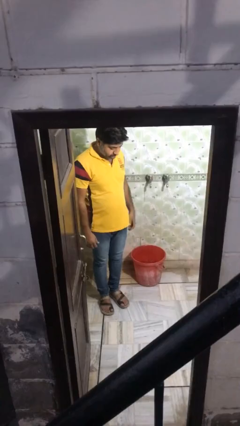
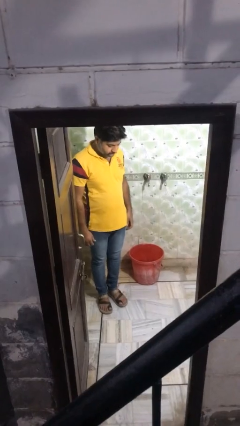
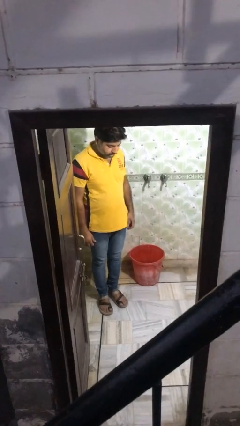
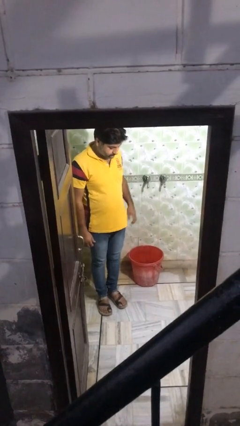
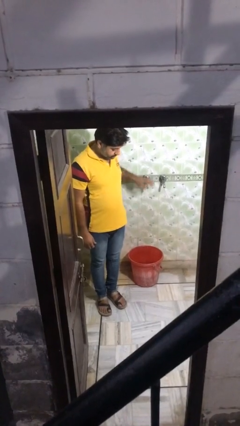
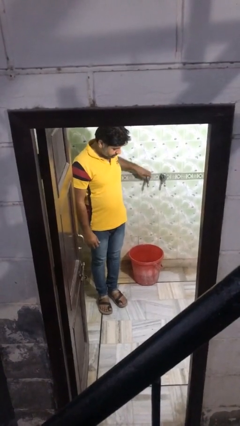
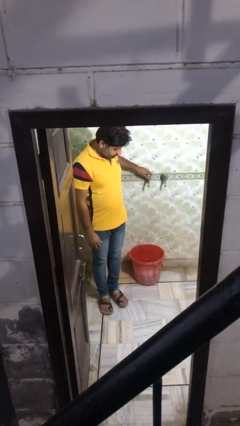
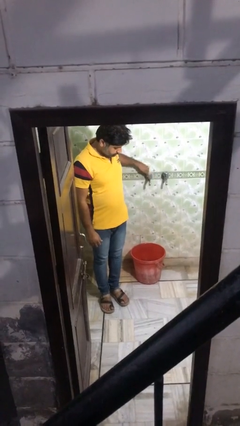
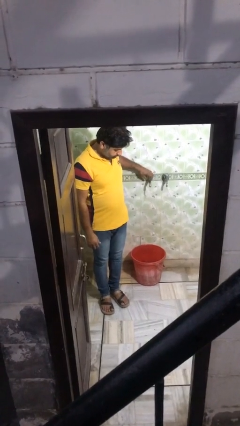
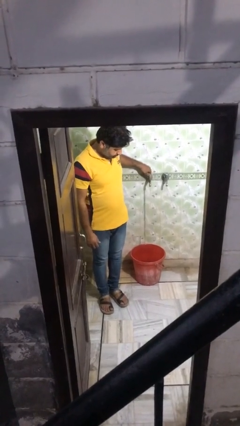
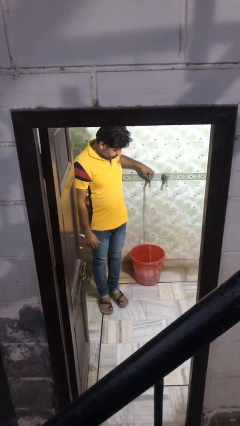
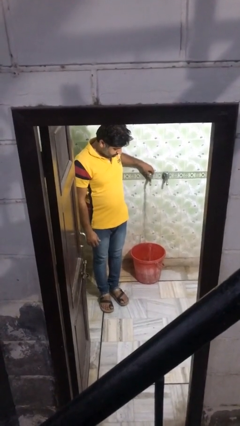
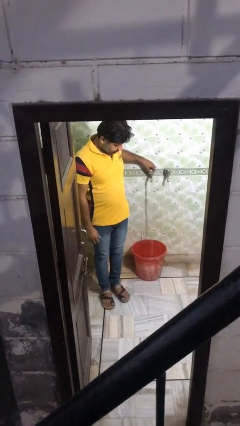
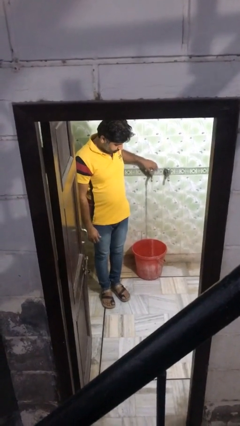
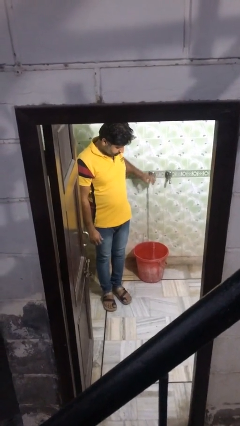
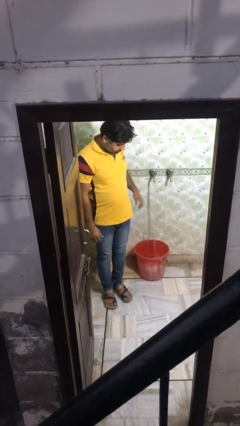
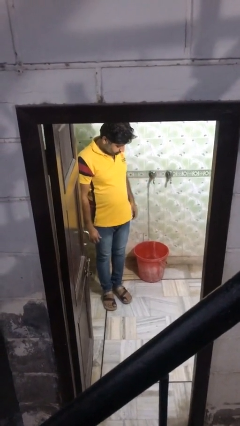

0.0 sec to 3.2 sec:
person turns on faucet

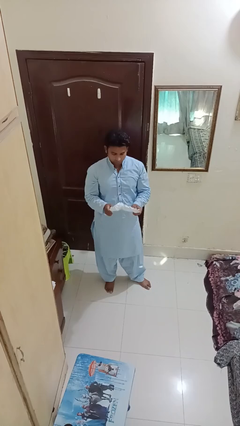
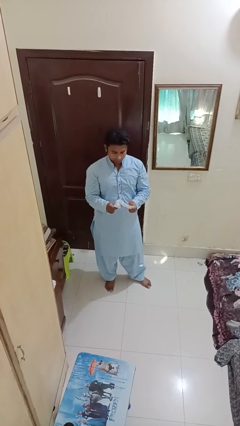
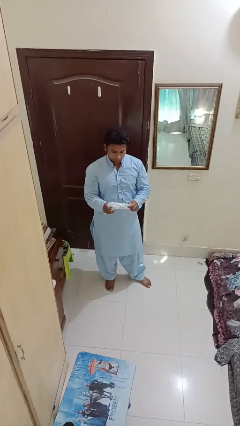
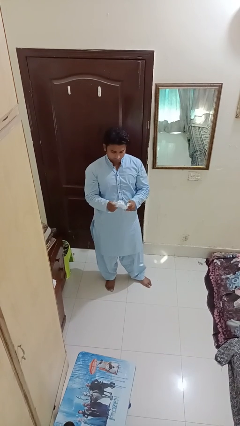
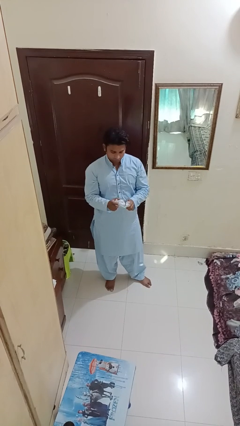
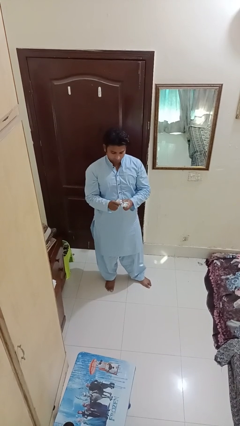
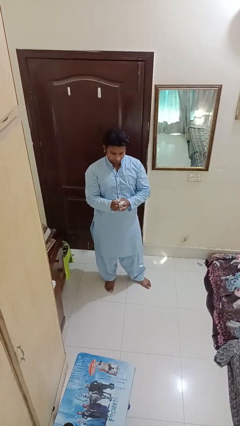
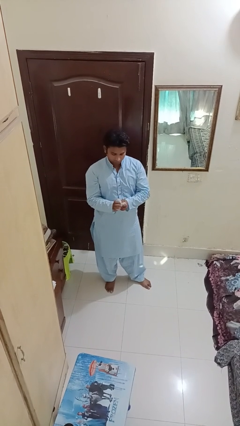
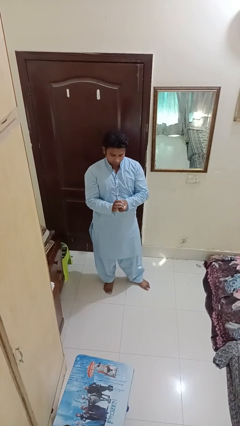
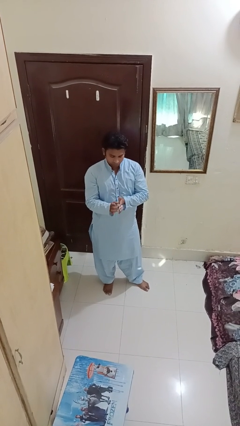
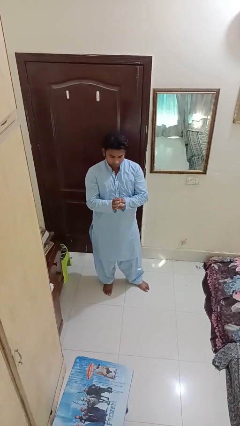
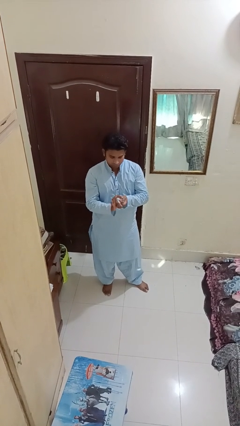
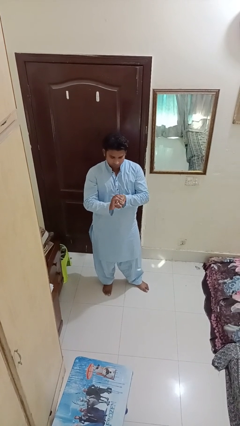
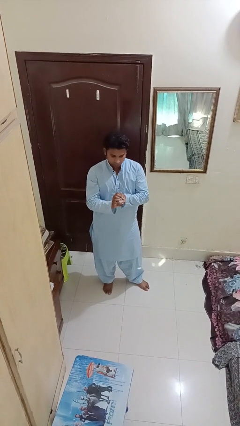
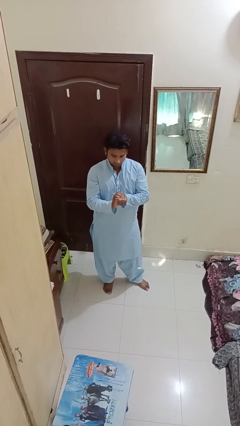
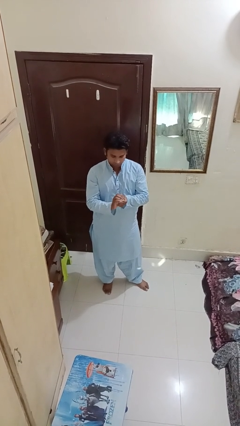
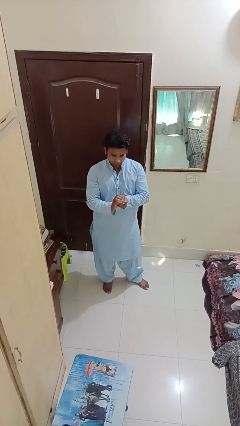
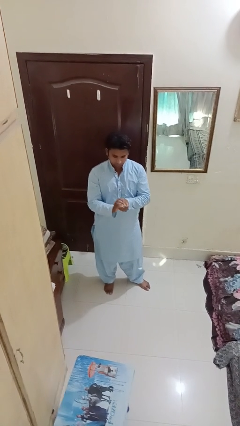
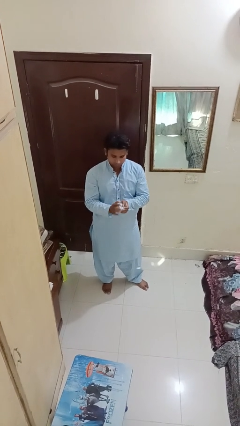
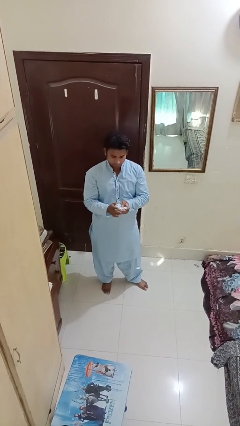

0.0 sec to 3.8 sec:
person crumples paper

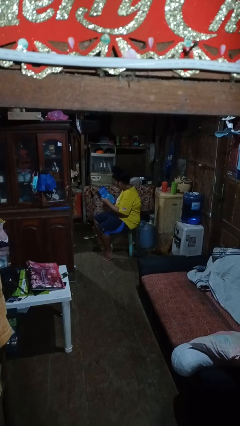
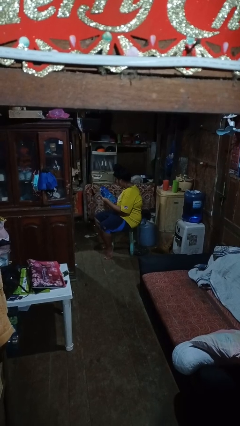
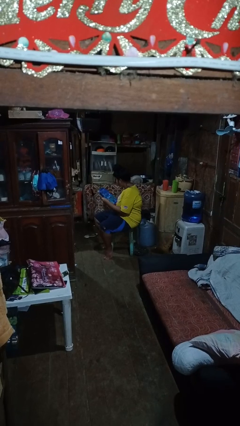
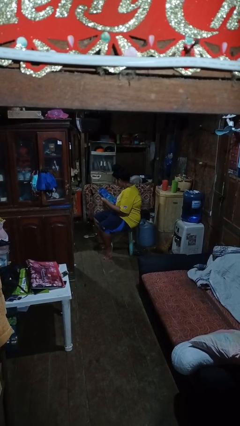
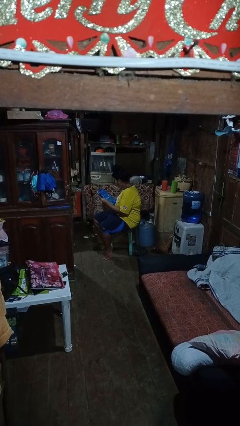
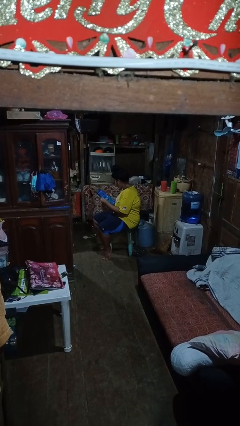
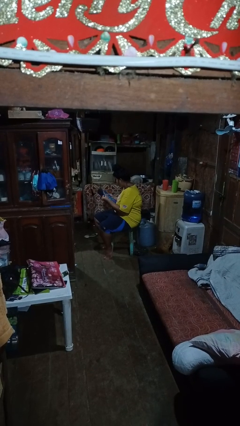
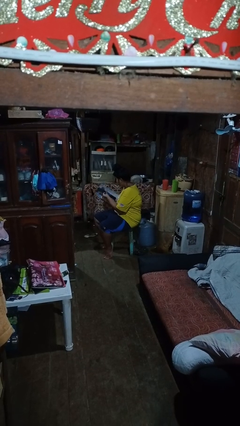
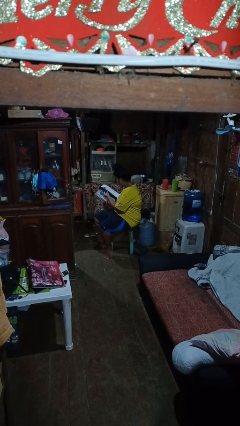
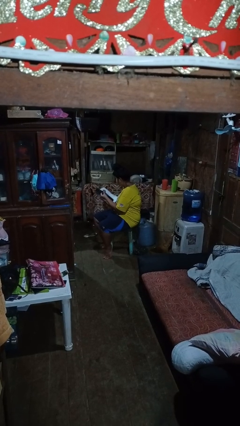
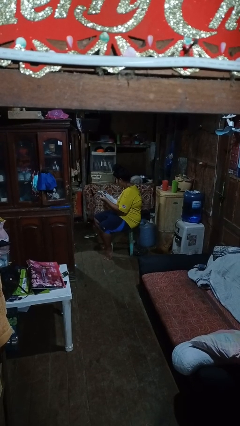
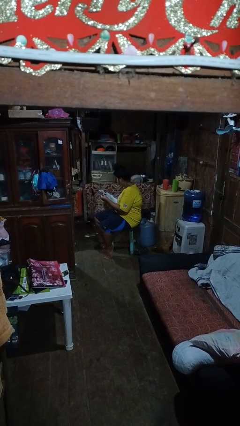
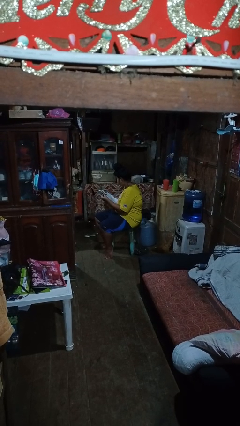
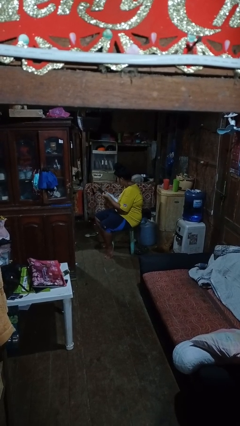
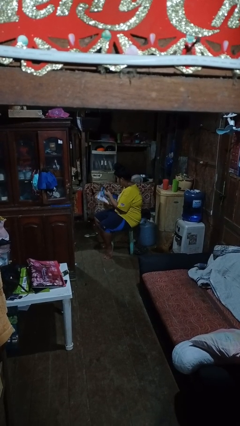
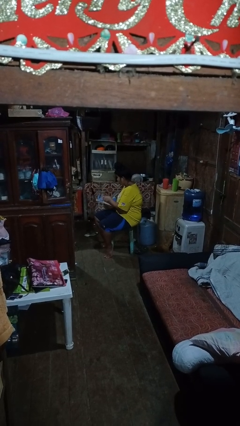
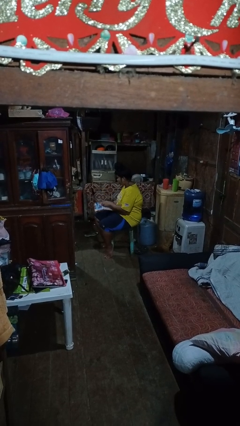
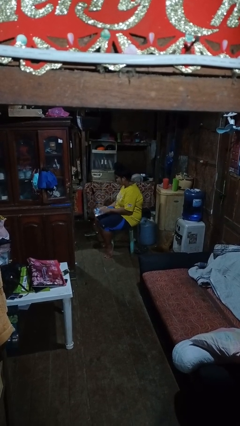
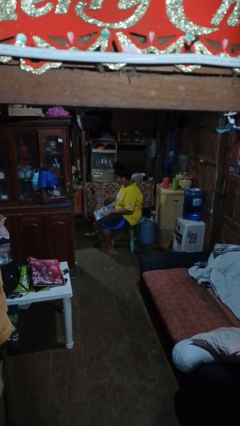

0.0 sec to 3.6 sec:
person reads magazine

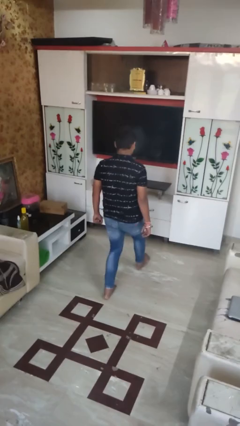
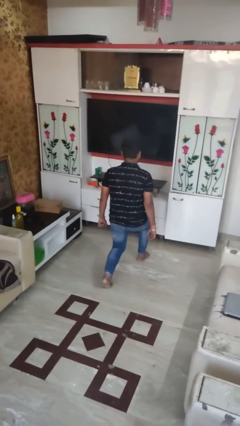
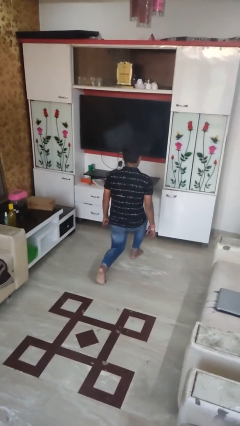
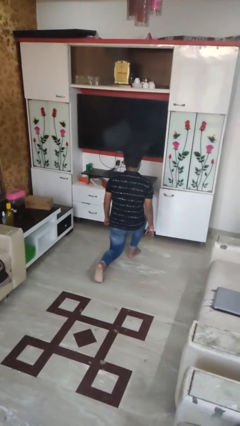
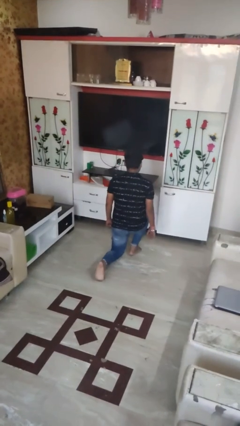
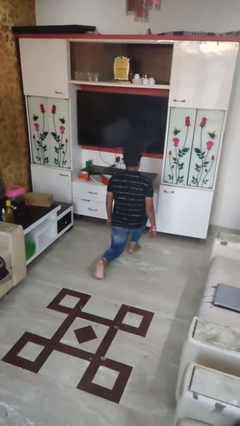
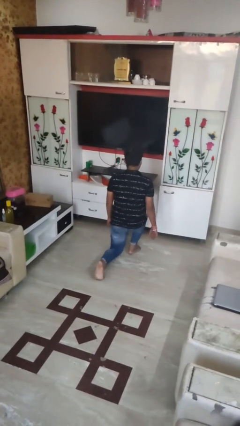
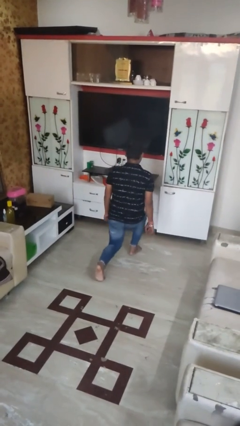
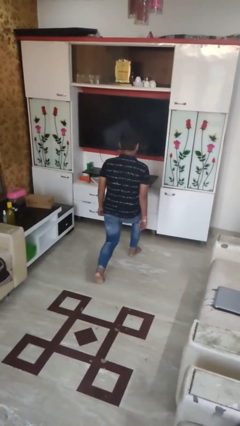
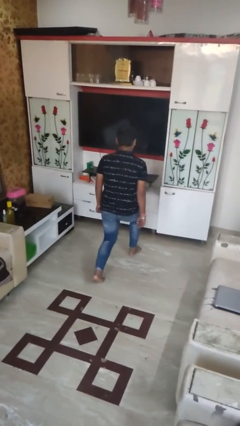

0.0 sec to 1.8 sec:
person exercises with lunges

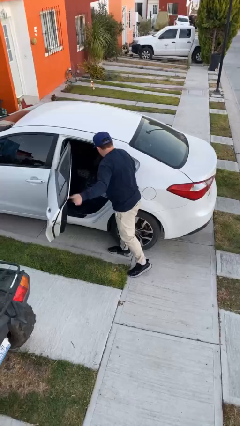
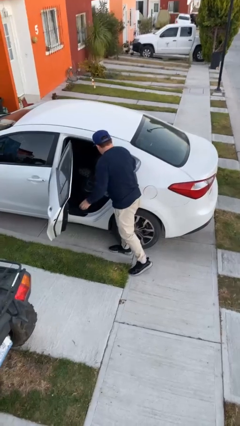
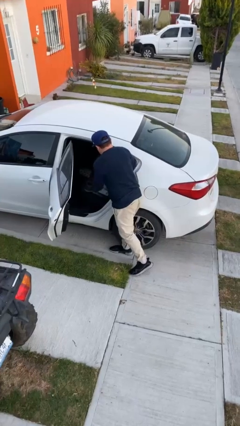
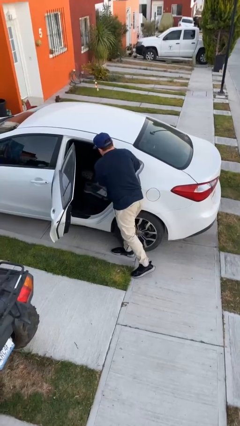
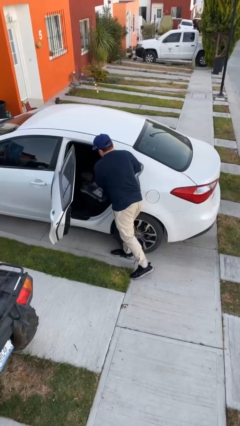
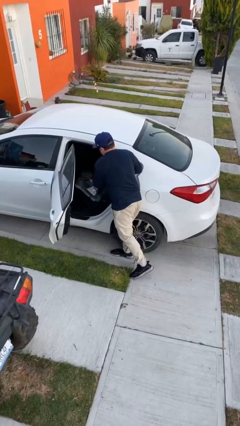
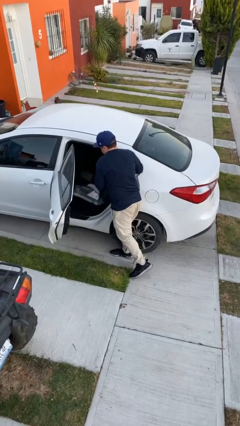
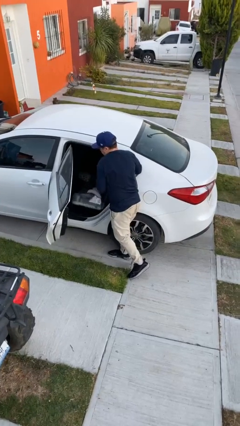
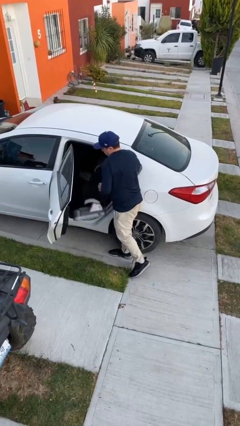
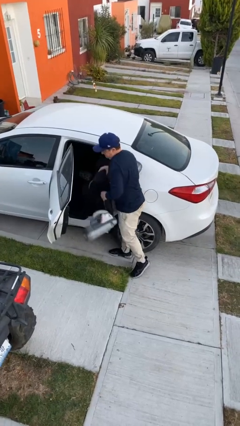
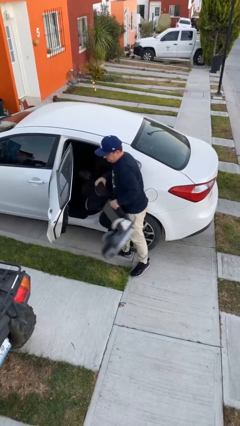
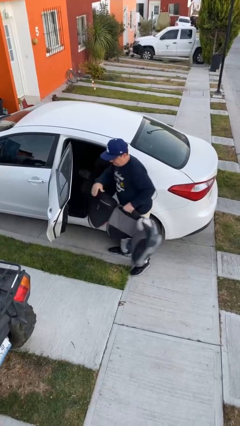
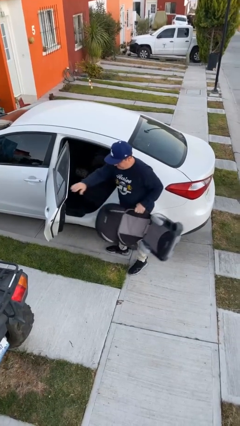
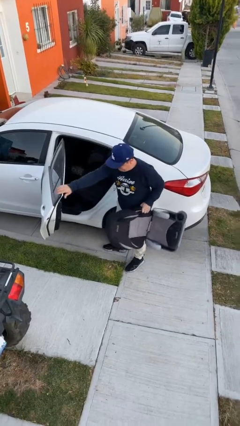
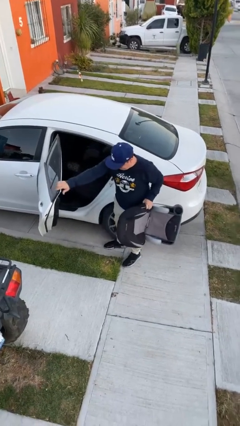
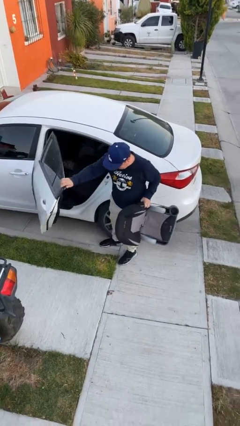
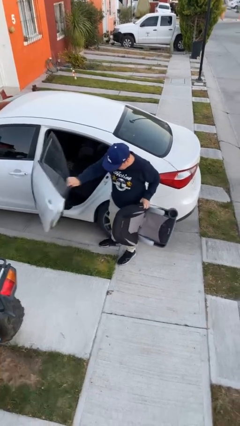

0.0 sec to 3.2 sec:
person unloads car

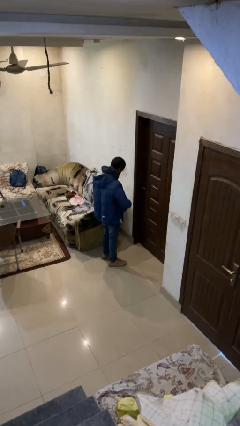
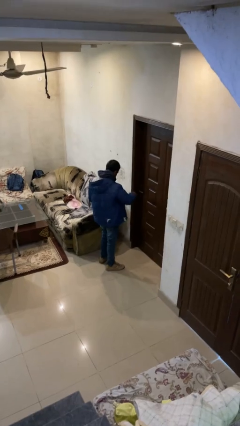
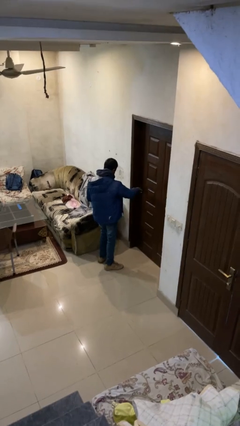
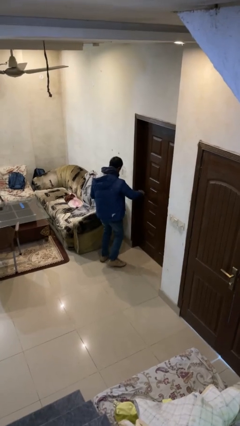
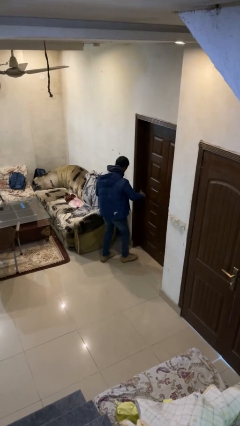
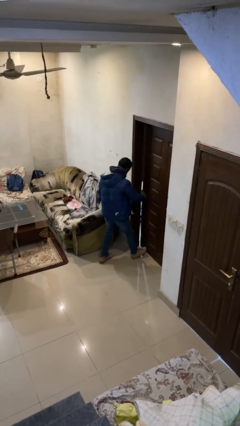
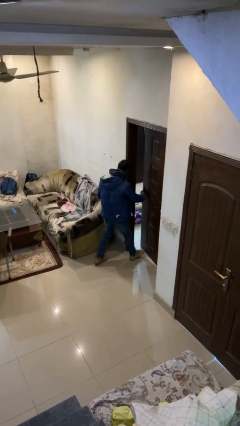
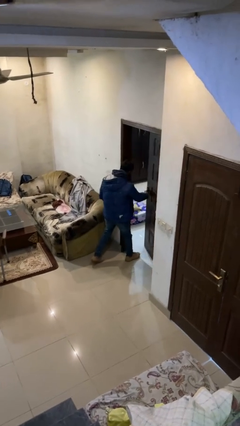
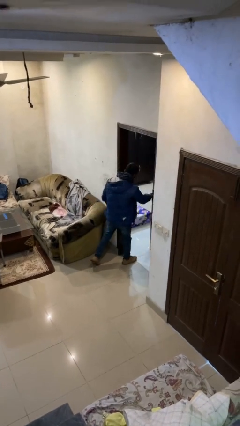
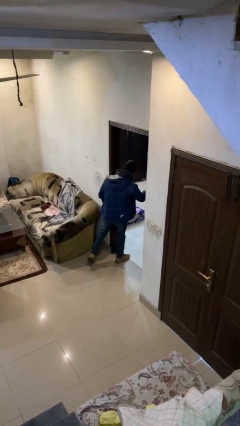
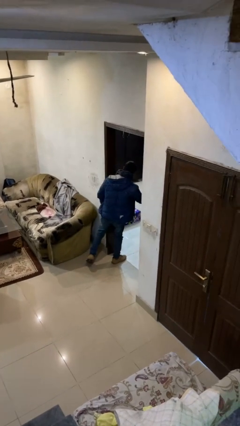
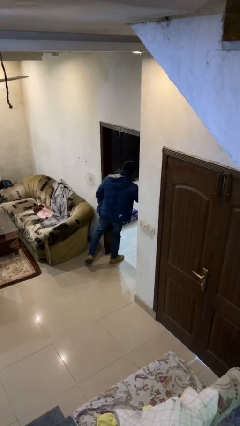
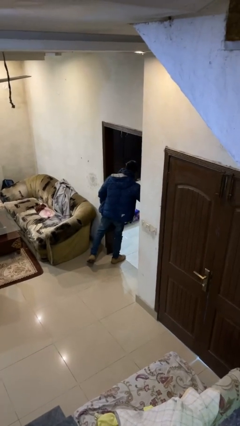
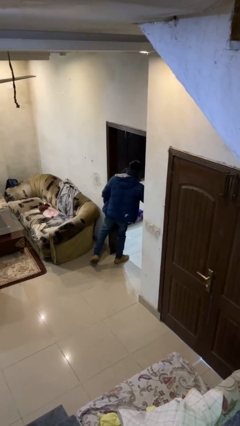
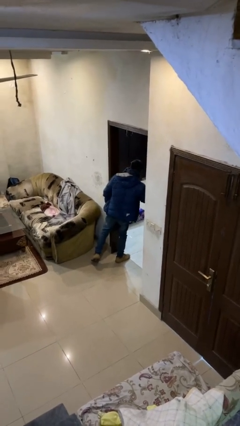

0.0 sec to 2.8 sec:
person opens facility door
